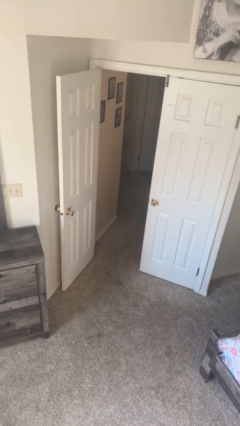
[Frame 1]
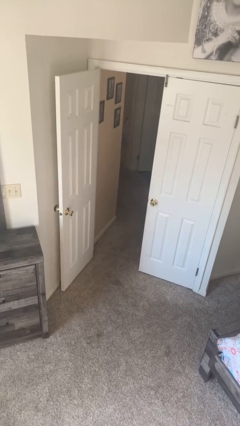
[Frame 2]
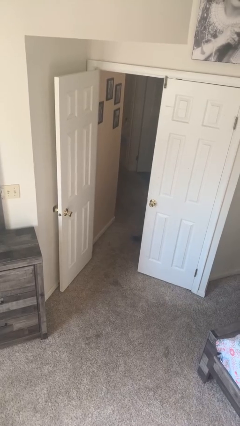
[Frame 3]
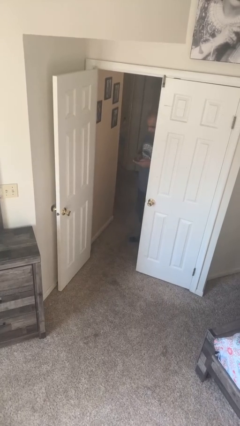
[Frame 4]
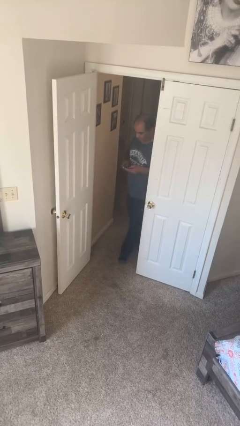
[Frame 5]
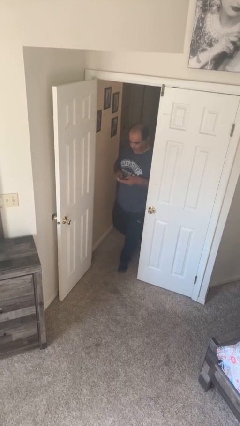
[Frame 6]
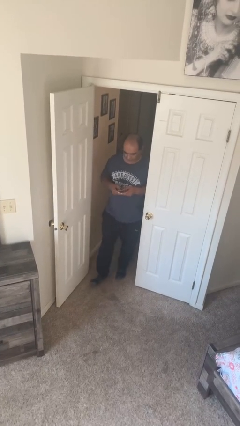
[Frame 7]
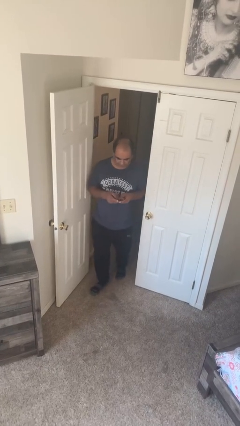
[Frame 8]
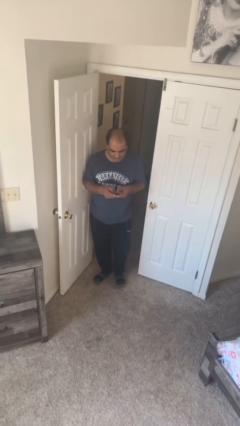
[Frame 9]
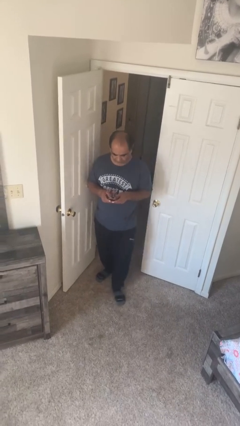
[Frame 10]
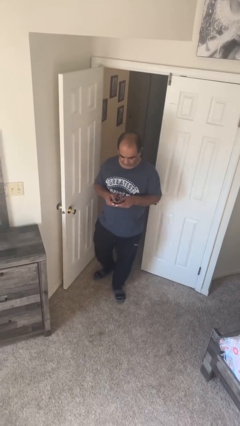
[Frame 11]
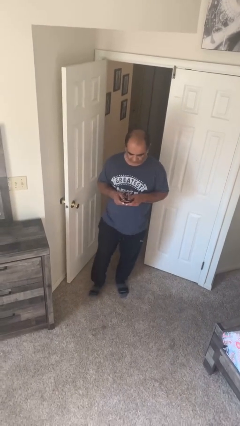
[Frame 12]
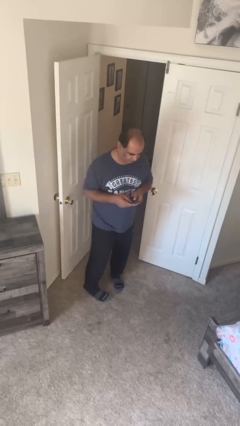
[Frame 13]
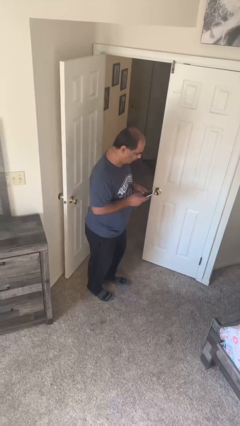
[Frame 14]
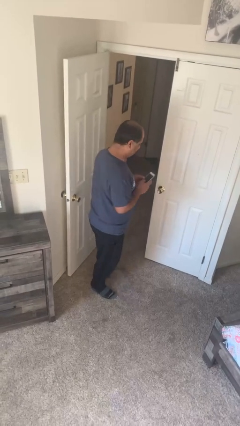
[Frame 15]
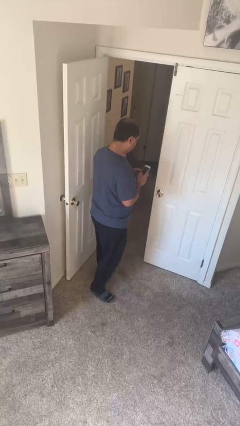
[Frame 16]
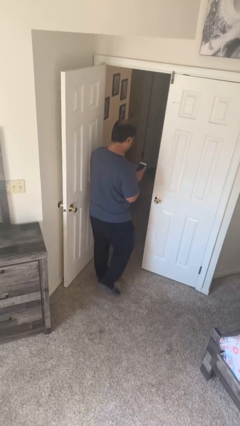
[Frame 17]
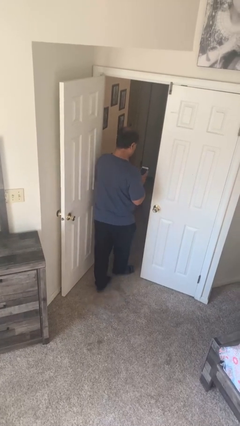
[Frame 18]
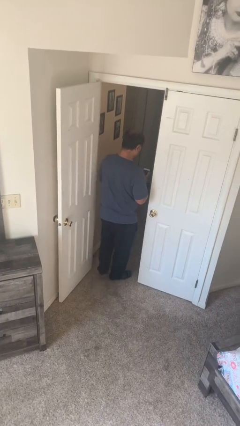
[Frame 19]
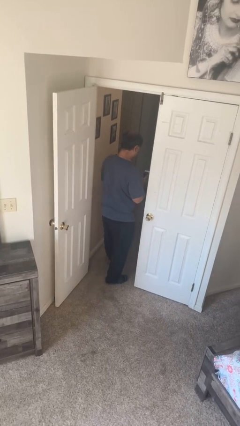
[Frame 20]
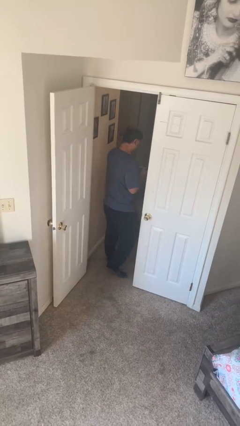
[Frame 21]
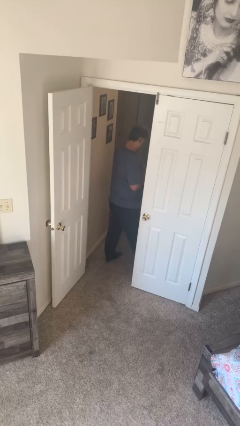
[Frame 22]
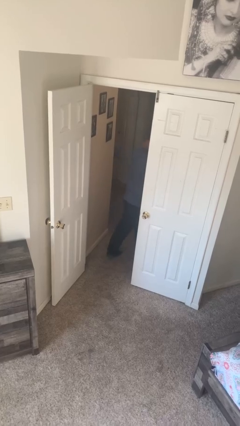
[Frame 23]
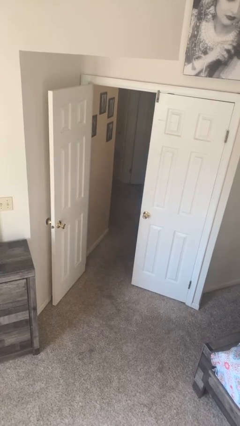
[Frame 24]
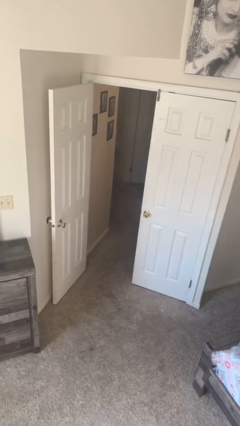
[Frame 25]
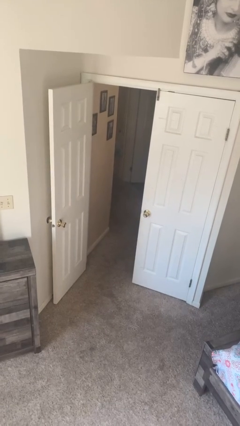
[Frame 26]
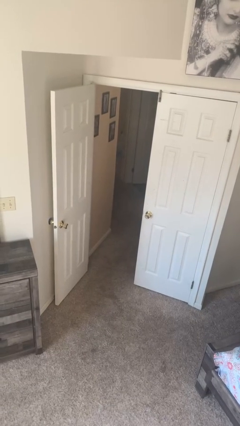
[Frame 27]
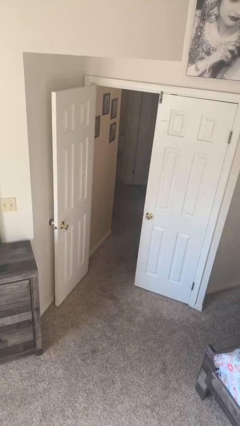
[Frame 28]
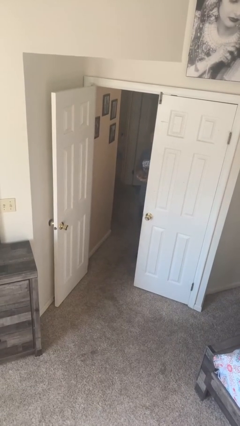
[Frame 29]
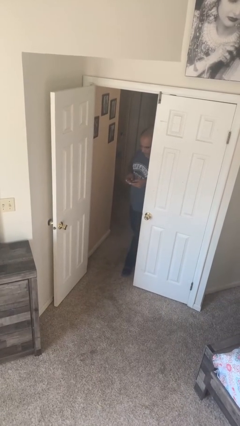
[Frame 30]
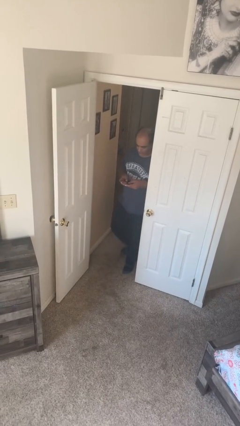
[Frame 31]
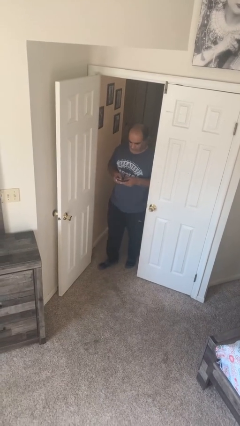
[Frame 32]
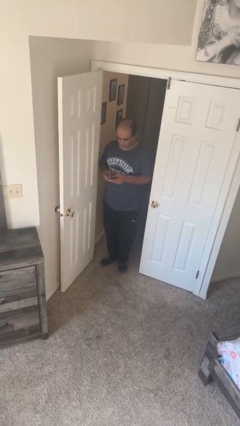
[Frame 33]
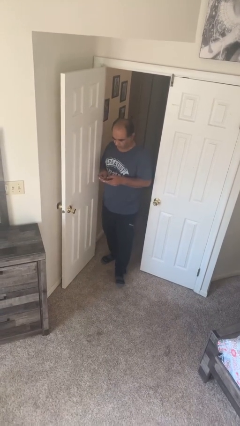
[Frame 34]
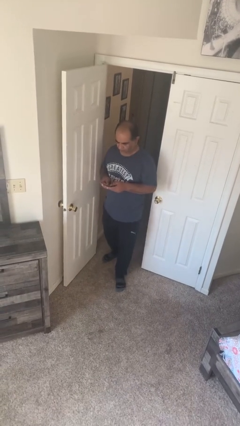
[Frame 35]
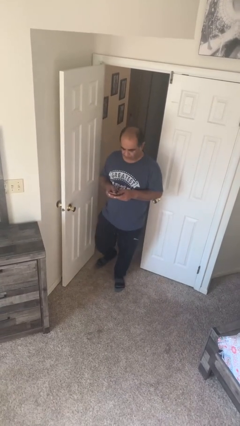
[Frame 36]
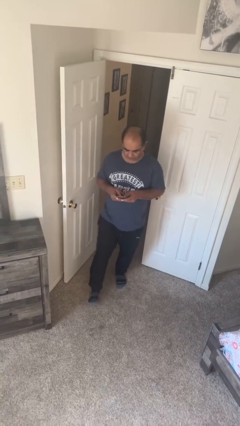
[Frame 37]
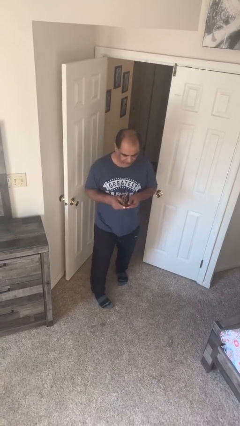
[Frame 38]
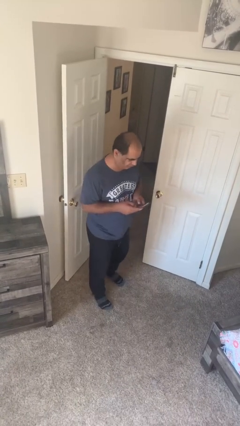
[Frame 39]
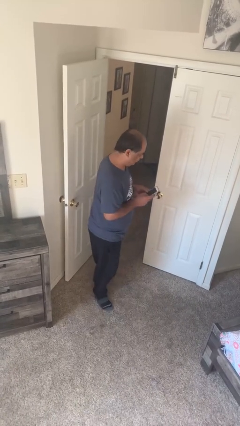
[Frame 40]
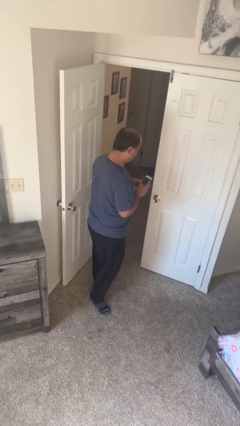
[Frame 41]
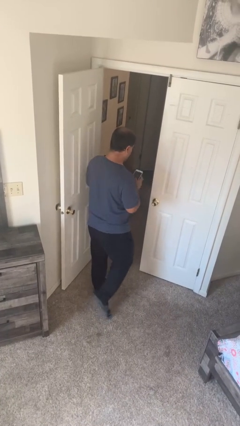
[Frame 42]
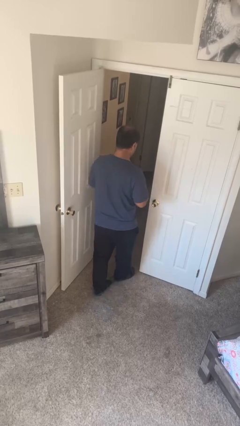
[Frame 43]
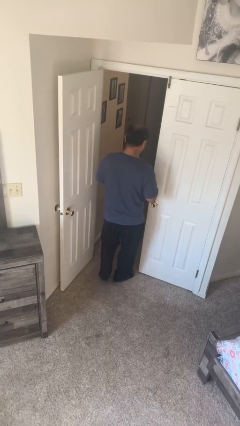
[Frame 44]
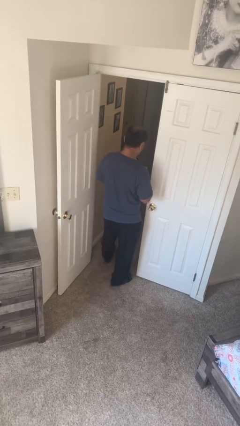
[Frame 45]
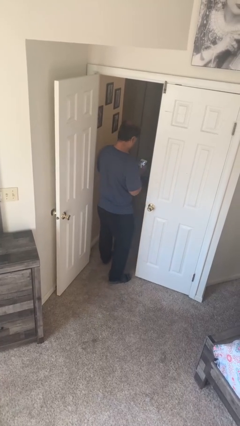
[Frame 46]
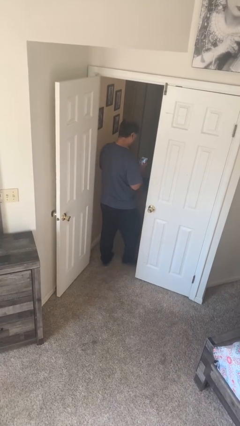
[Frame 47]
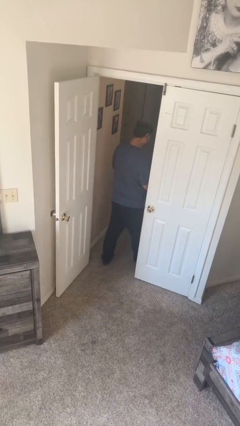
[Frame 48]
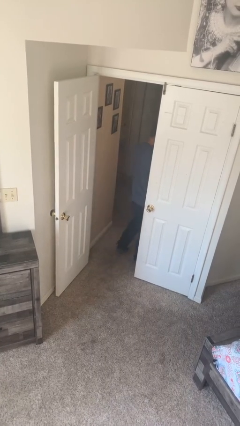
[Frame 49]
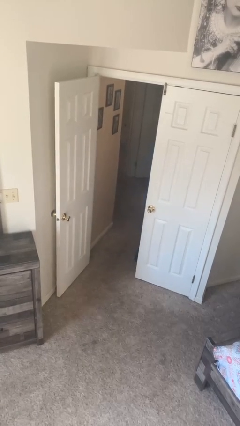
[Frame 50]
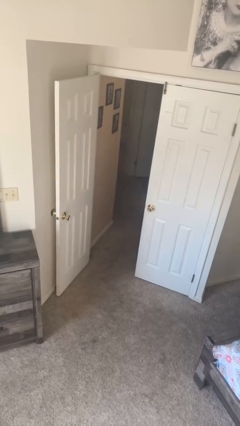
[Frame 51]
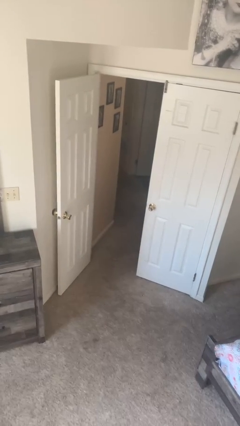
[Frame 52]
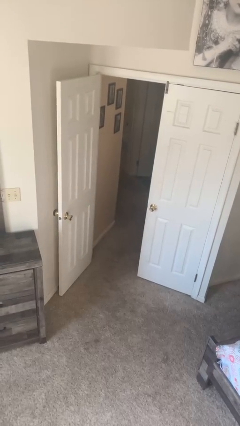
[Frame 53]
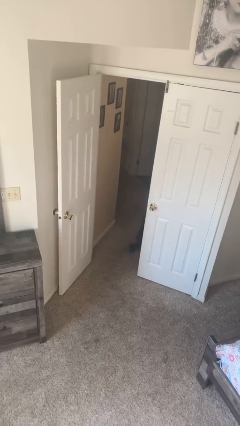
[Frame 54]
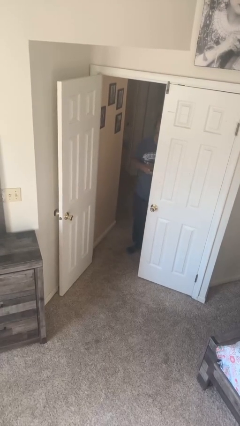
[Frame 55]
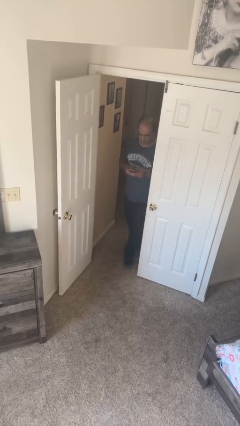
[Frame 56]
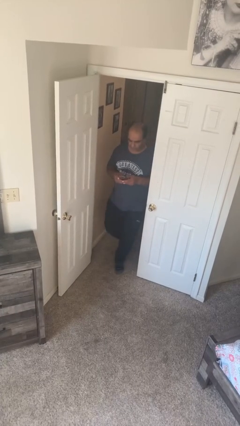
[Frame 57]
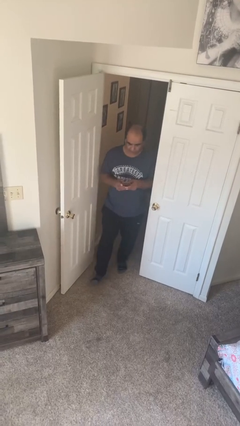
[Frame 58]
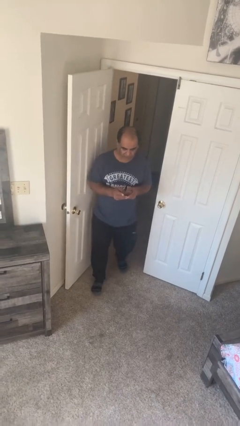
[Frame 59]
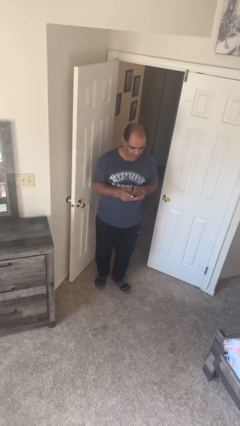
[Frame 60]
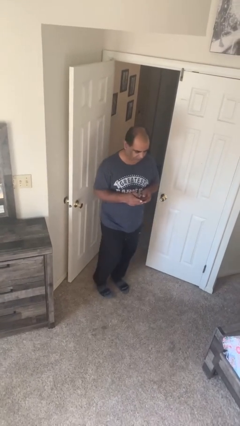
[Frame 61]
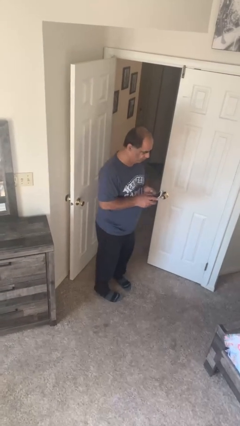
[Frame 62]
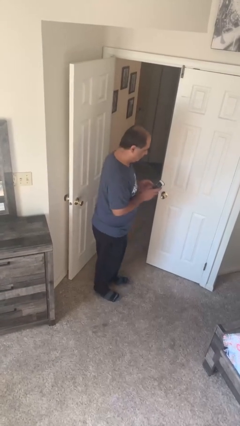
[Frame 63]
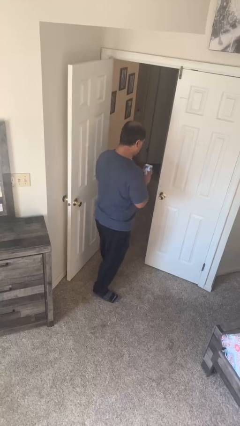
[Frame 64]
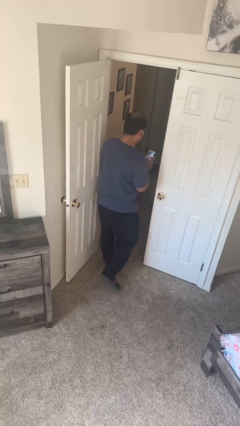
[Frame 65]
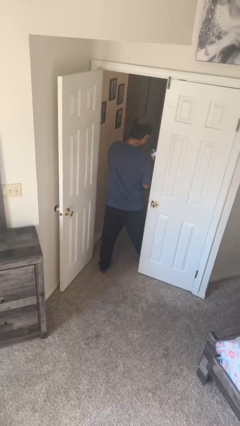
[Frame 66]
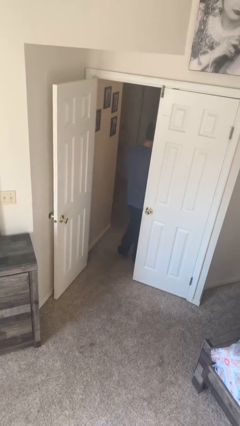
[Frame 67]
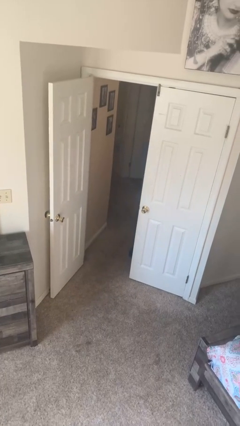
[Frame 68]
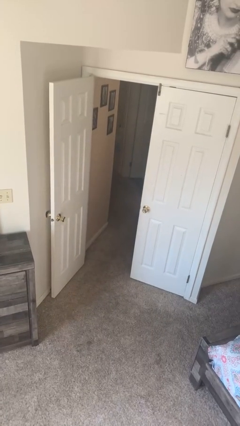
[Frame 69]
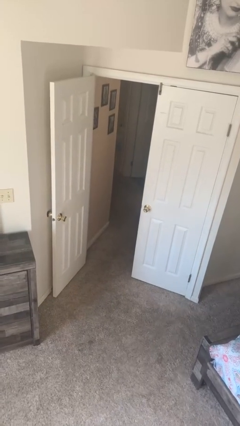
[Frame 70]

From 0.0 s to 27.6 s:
person texts on phone

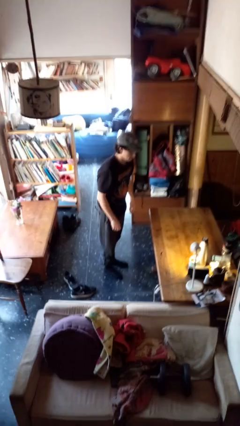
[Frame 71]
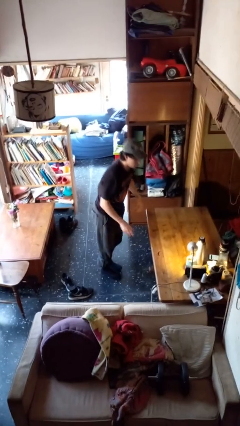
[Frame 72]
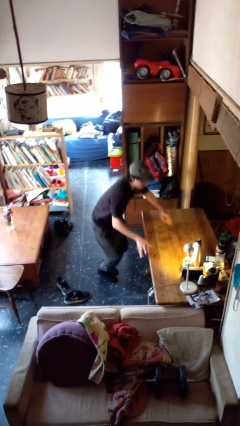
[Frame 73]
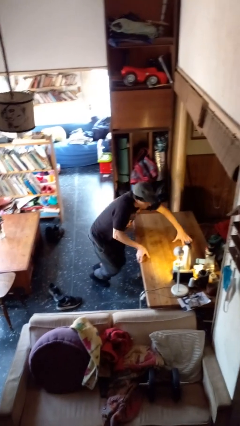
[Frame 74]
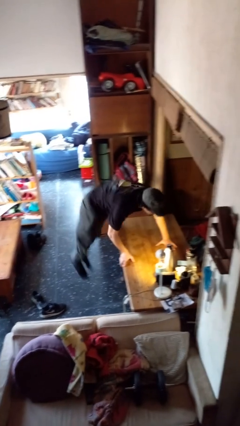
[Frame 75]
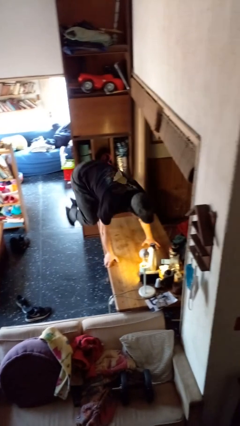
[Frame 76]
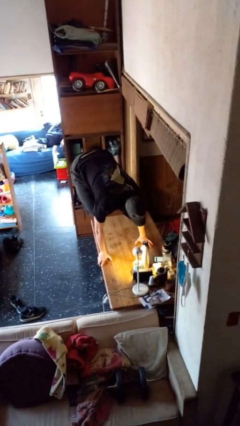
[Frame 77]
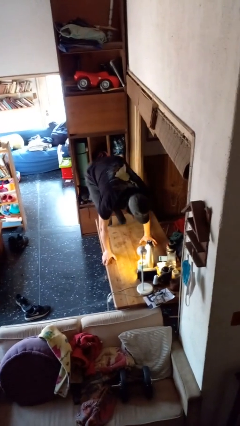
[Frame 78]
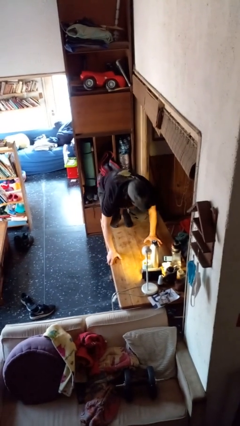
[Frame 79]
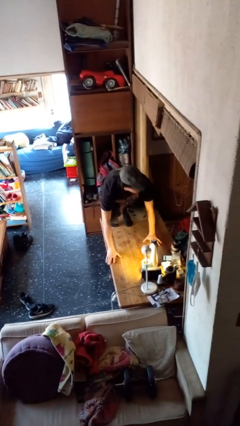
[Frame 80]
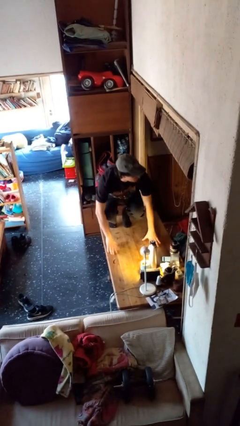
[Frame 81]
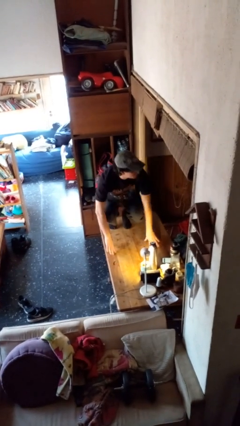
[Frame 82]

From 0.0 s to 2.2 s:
person climbs on table

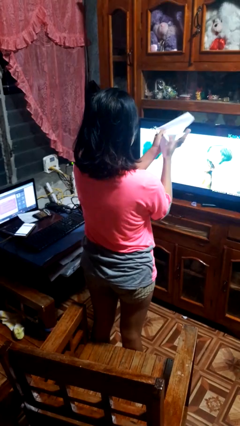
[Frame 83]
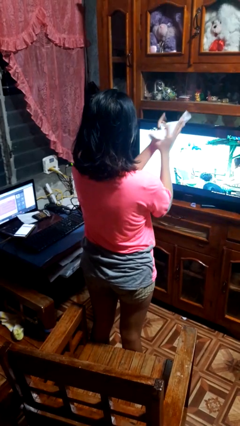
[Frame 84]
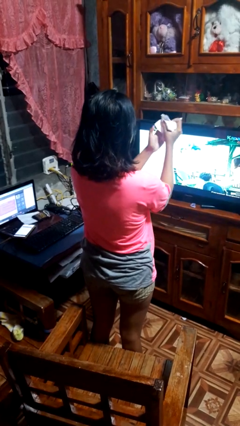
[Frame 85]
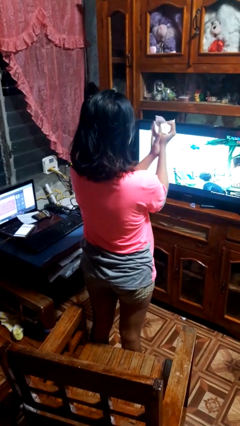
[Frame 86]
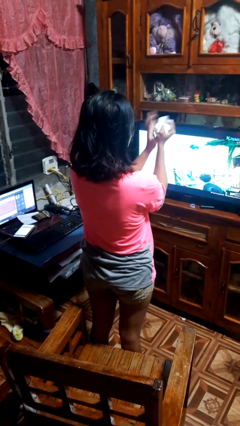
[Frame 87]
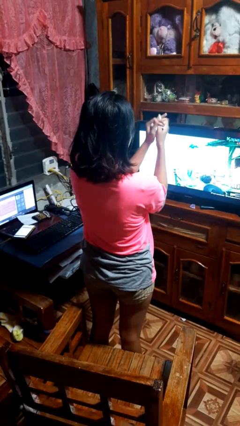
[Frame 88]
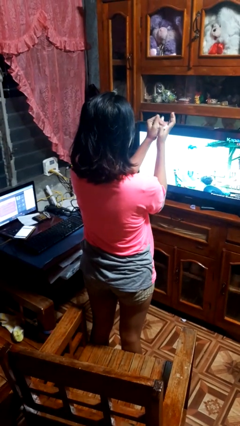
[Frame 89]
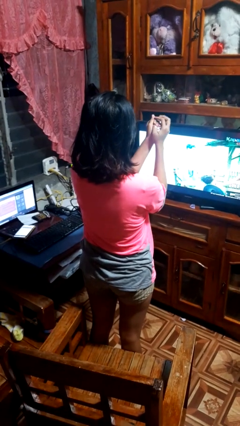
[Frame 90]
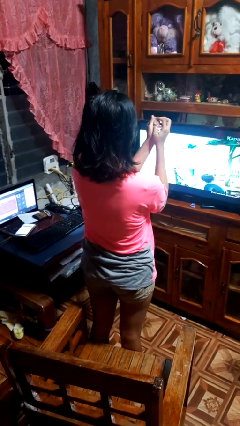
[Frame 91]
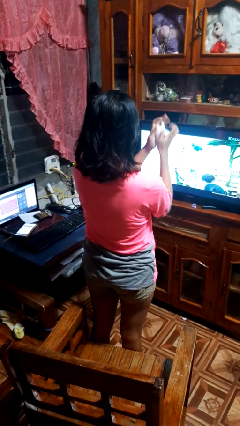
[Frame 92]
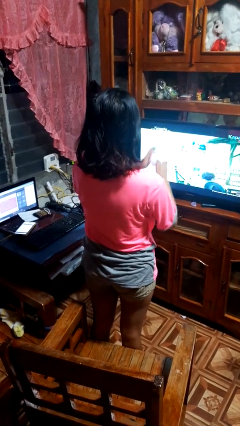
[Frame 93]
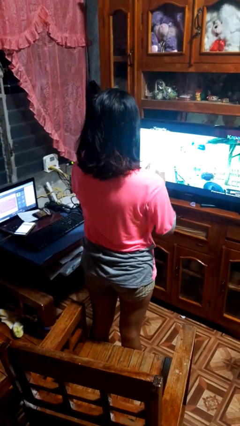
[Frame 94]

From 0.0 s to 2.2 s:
person crumples paper
